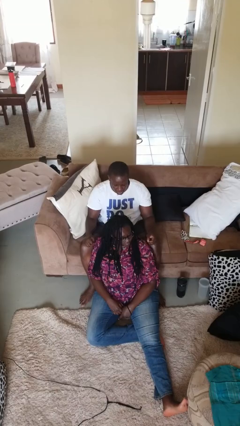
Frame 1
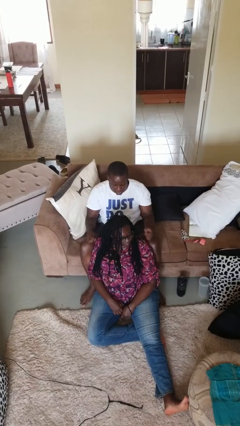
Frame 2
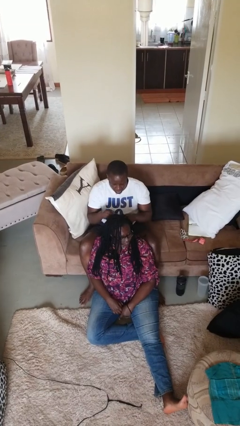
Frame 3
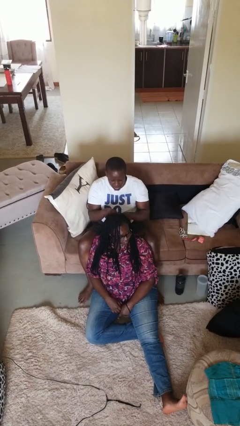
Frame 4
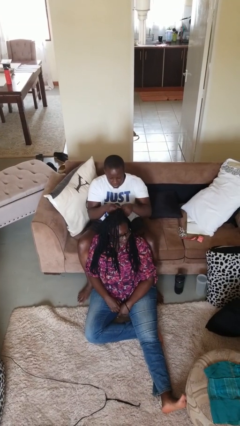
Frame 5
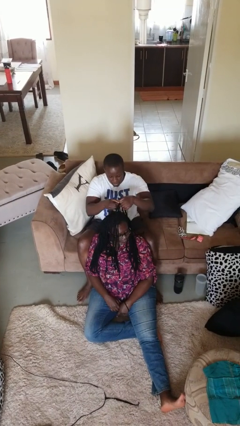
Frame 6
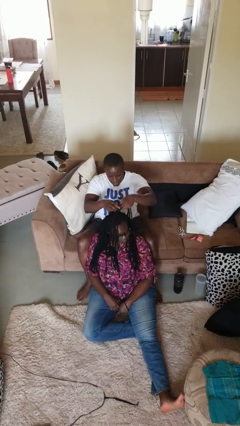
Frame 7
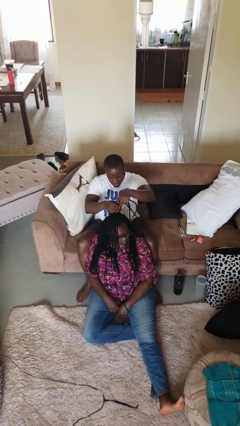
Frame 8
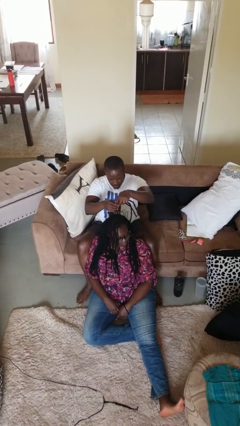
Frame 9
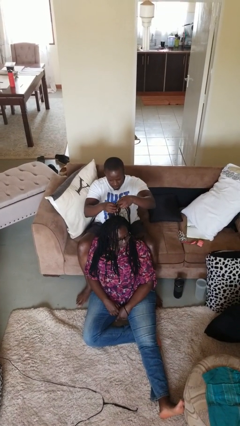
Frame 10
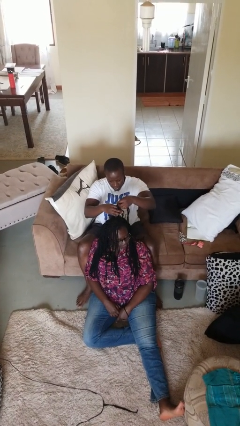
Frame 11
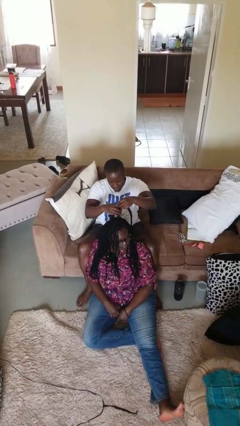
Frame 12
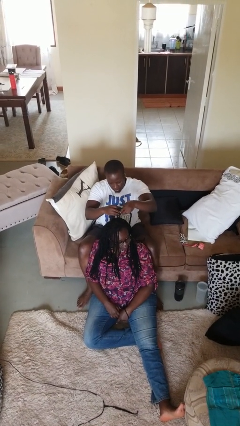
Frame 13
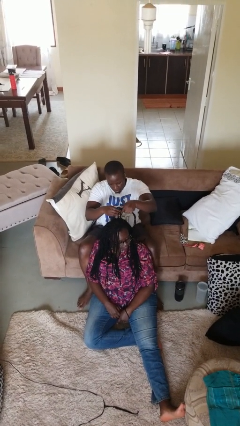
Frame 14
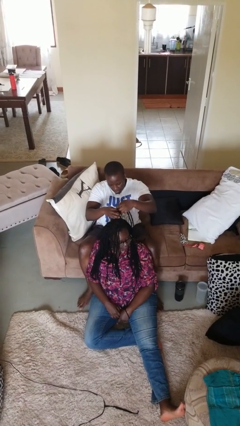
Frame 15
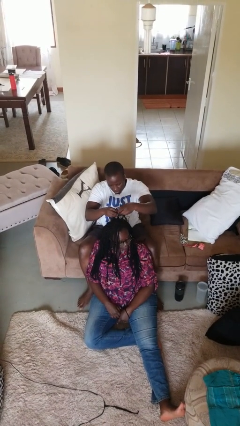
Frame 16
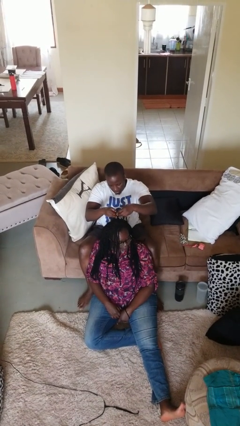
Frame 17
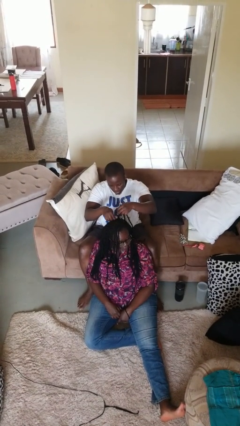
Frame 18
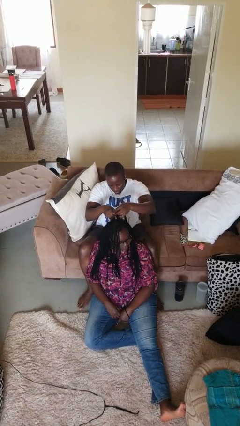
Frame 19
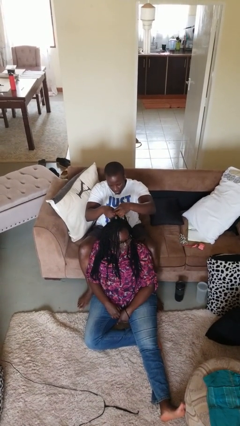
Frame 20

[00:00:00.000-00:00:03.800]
person braids hair of person

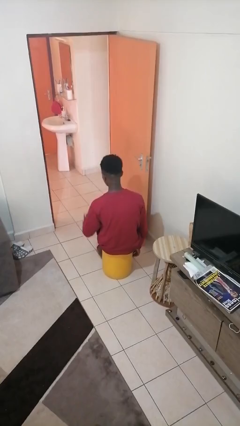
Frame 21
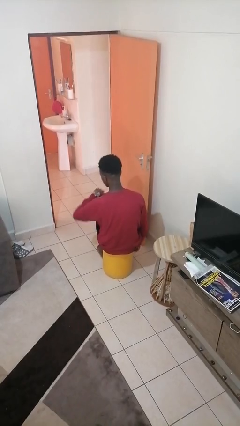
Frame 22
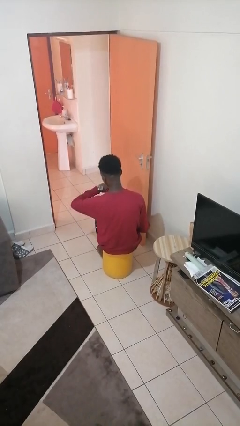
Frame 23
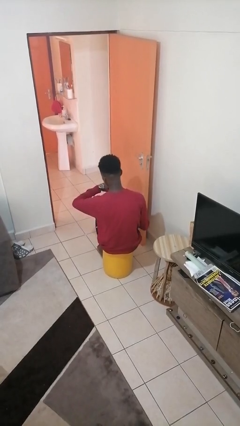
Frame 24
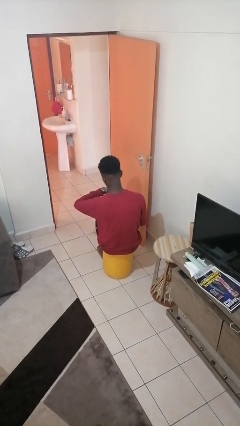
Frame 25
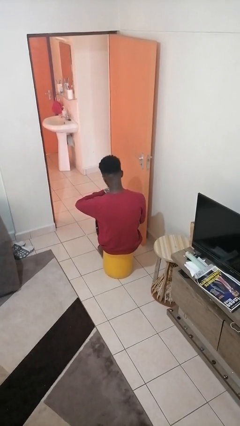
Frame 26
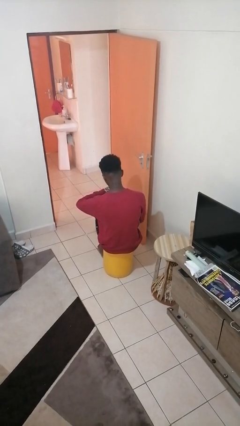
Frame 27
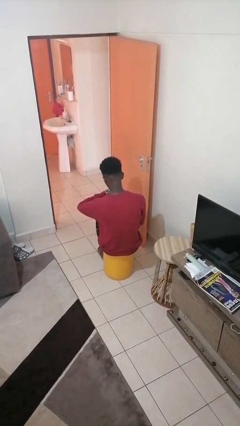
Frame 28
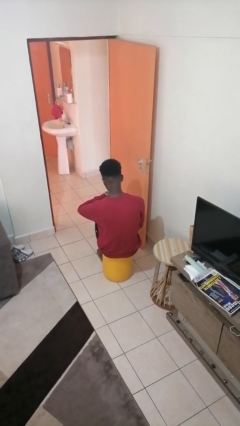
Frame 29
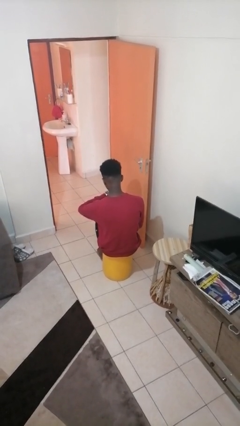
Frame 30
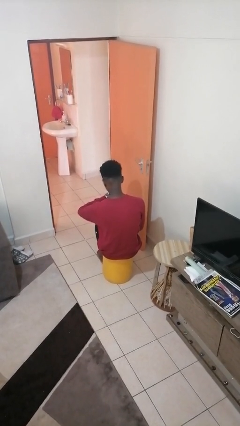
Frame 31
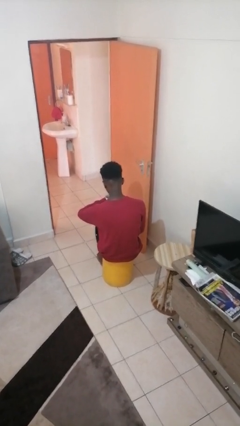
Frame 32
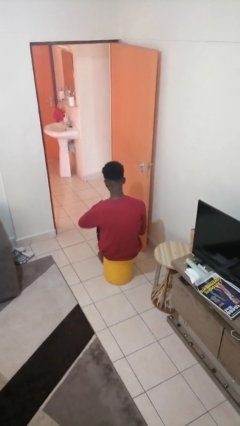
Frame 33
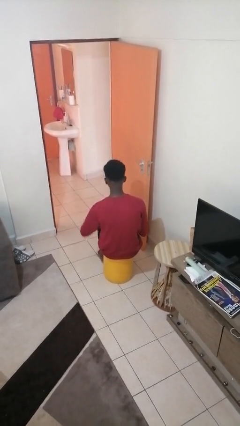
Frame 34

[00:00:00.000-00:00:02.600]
person looks at wristwatch

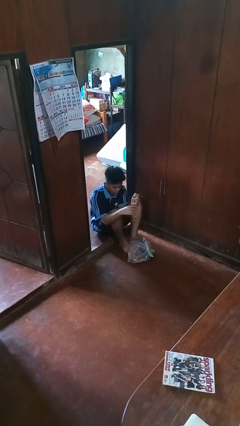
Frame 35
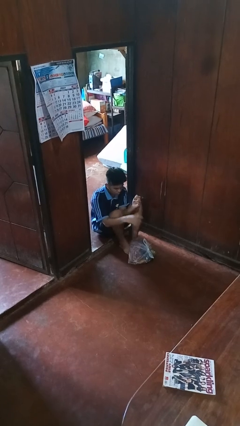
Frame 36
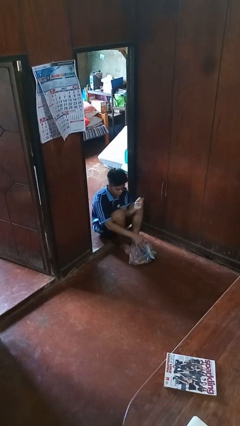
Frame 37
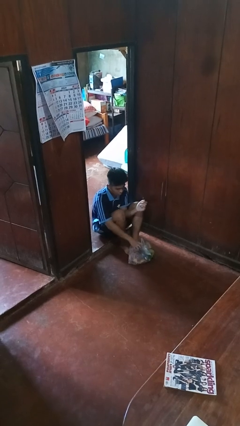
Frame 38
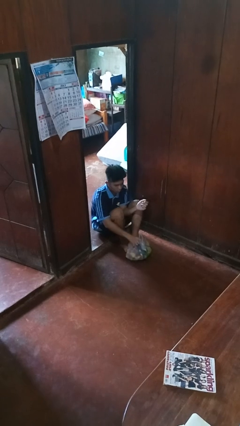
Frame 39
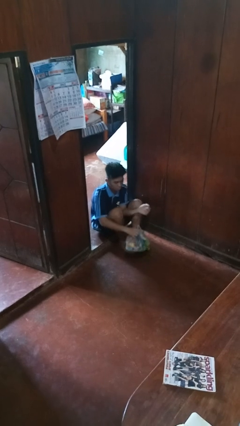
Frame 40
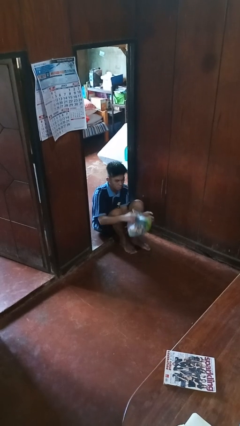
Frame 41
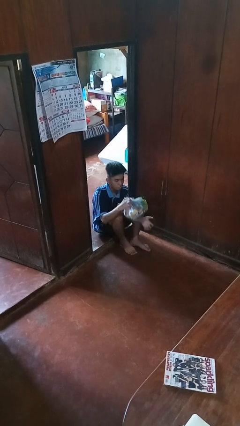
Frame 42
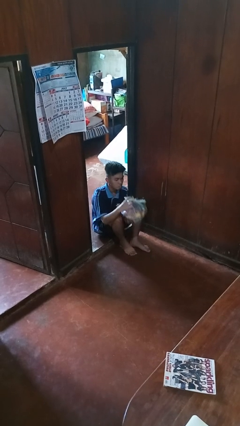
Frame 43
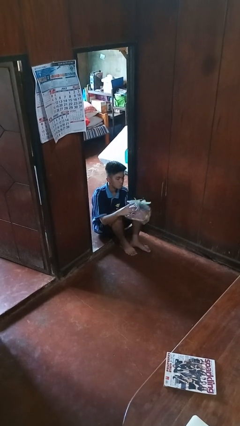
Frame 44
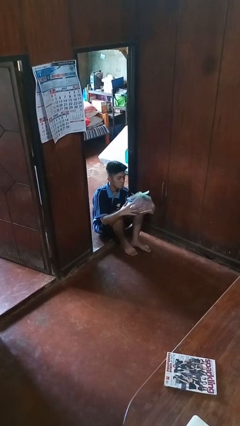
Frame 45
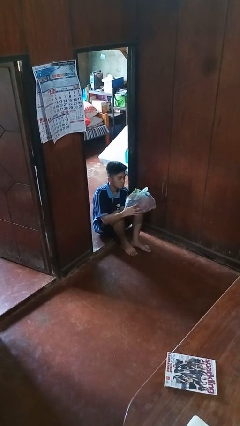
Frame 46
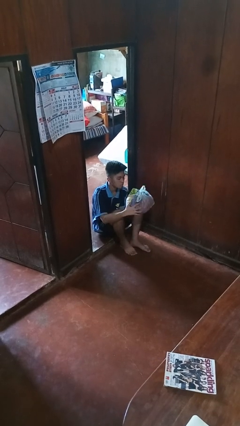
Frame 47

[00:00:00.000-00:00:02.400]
person picks up object from floor

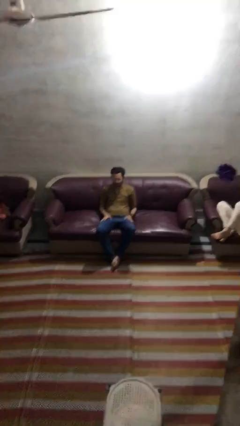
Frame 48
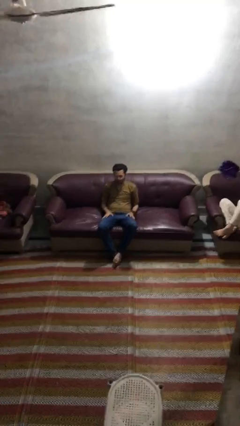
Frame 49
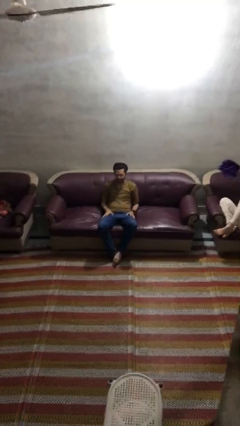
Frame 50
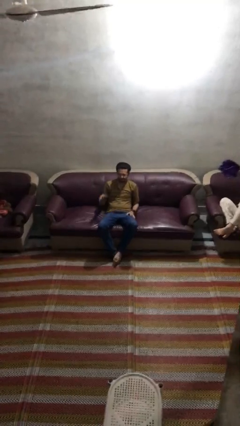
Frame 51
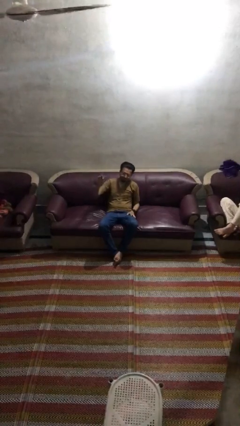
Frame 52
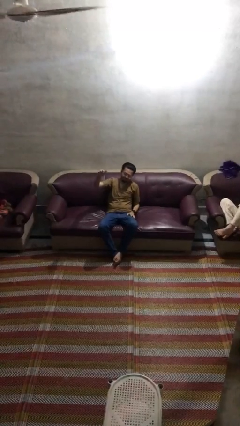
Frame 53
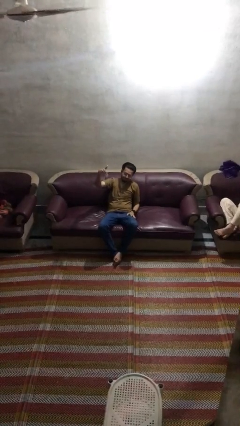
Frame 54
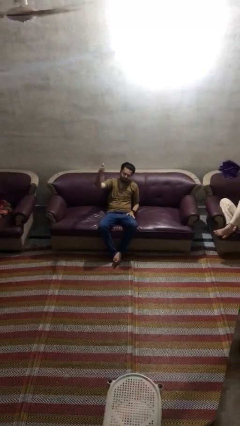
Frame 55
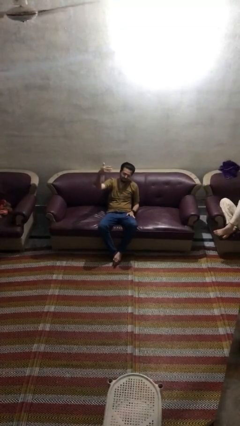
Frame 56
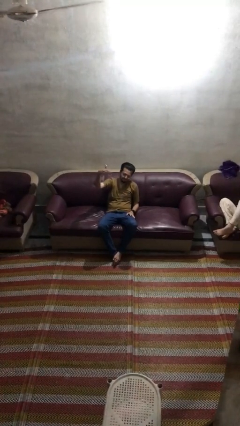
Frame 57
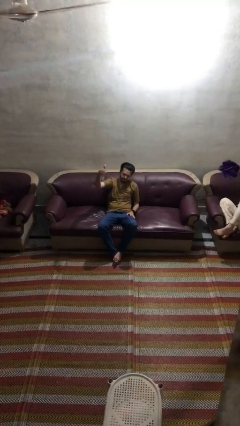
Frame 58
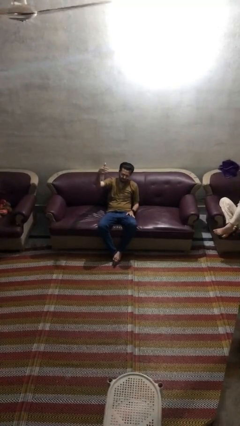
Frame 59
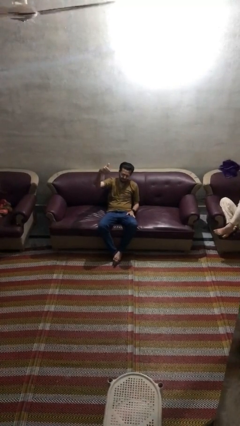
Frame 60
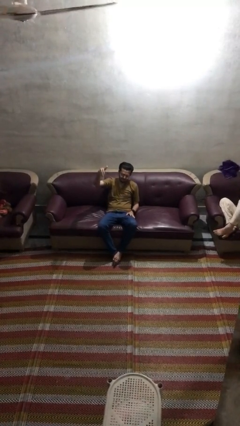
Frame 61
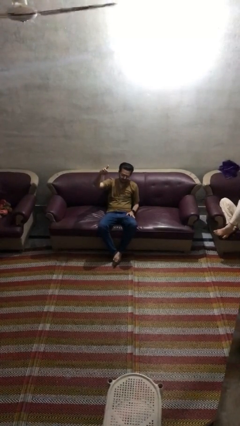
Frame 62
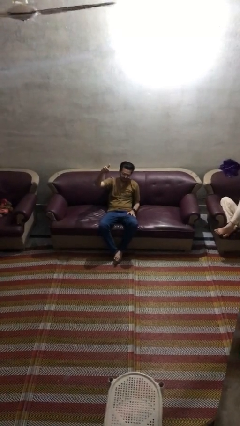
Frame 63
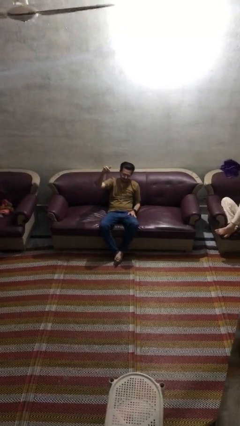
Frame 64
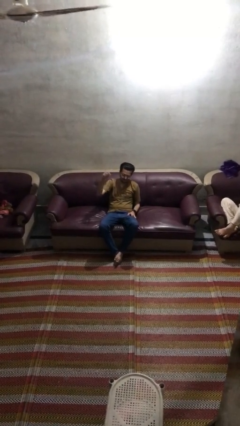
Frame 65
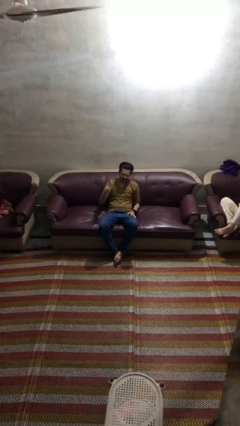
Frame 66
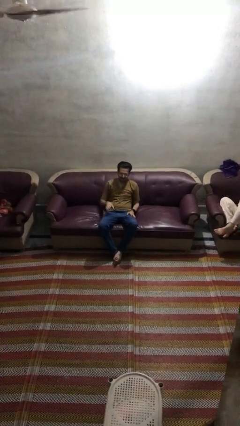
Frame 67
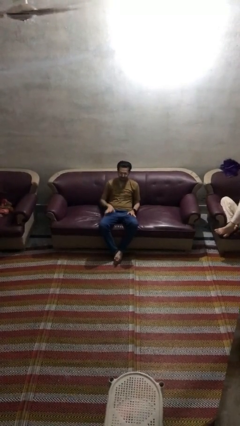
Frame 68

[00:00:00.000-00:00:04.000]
person gestures come here

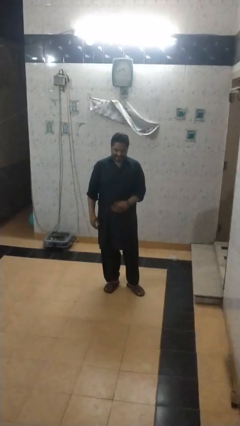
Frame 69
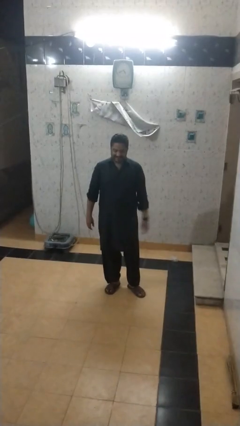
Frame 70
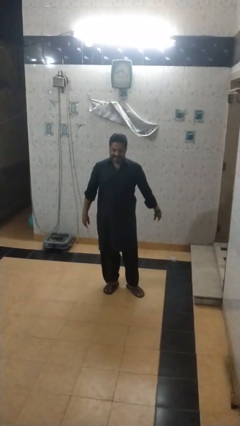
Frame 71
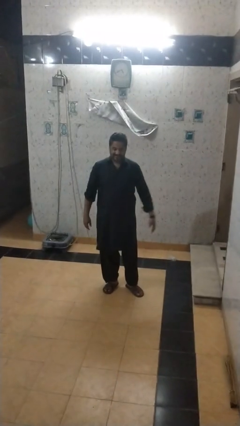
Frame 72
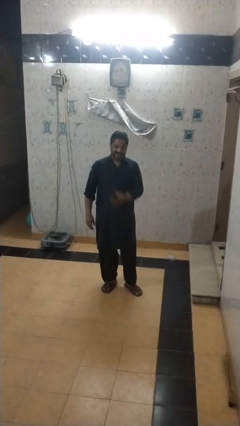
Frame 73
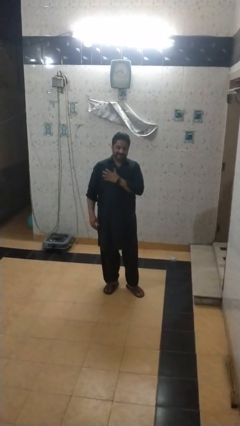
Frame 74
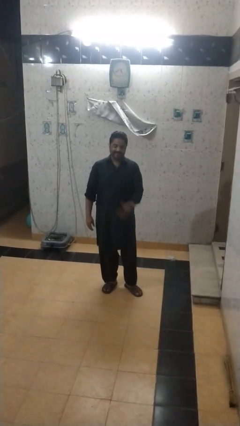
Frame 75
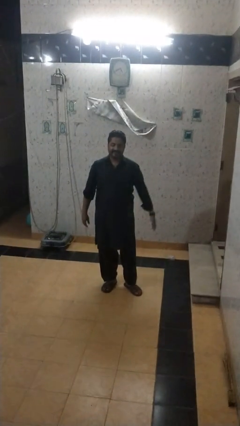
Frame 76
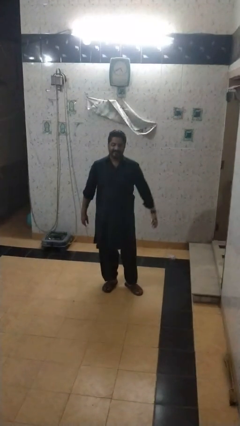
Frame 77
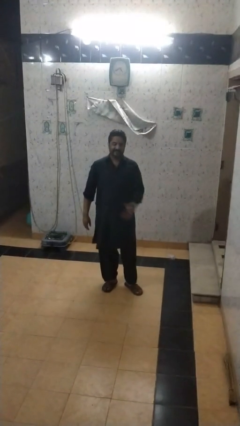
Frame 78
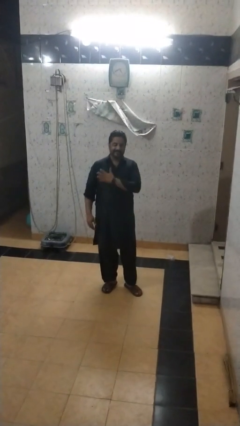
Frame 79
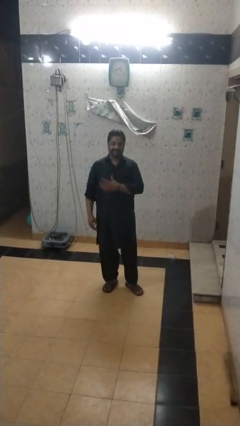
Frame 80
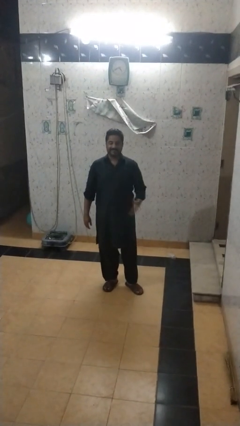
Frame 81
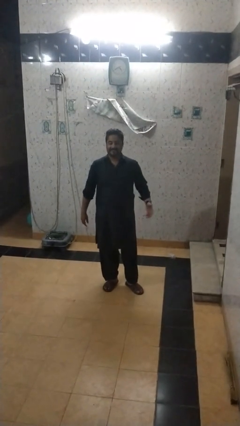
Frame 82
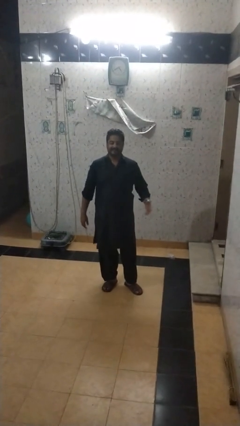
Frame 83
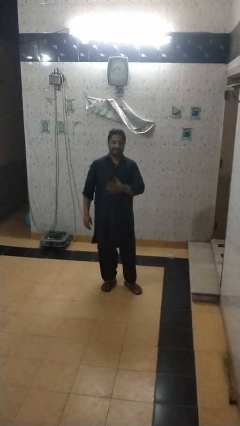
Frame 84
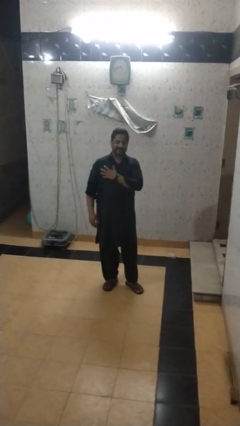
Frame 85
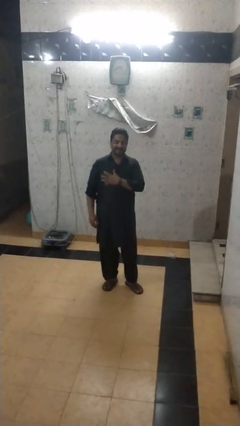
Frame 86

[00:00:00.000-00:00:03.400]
person drums on chest

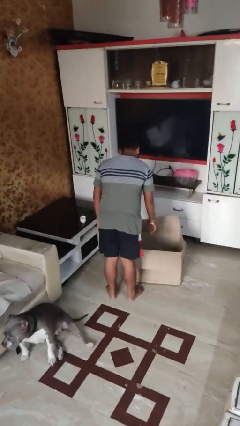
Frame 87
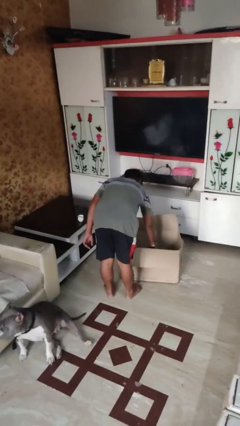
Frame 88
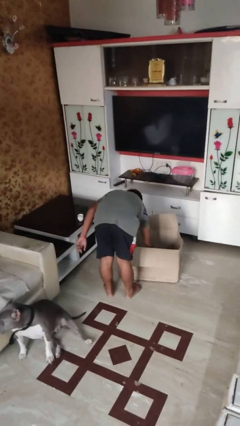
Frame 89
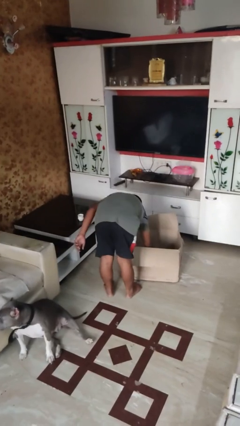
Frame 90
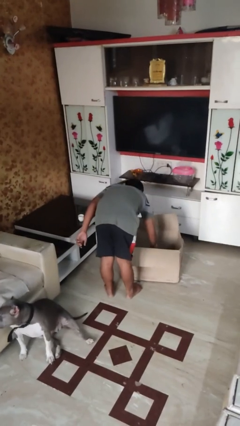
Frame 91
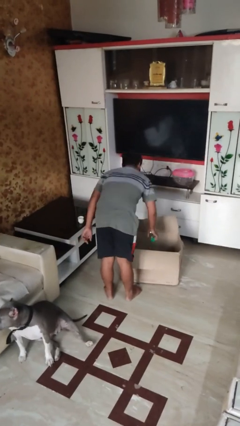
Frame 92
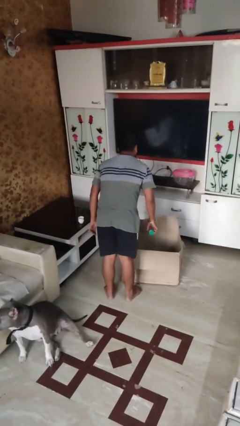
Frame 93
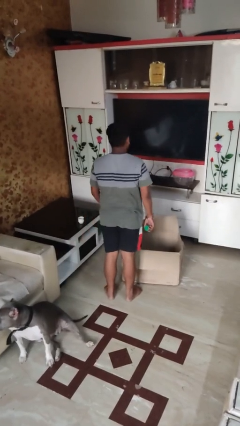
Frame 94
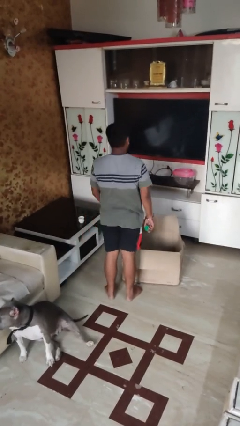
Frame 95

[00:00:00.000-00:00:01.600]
person takes object from box

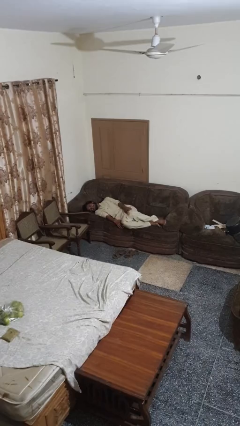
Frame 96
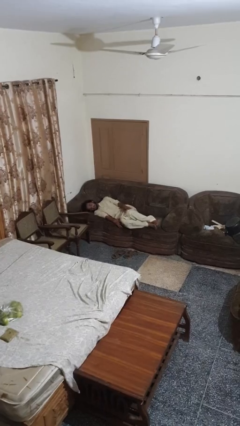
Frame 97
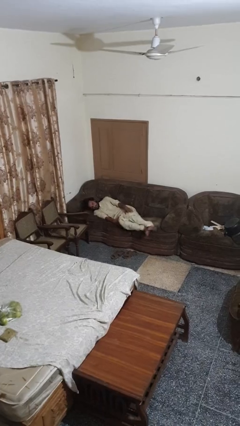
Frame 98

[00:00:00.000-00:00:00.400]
person stands up
